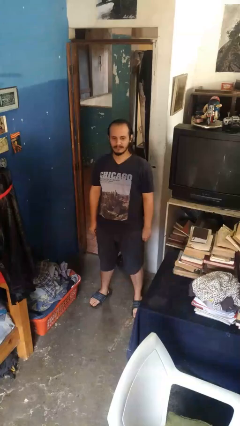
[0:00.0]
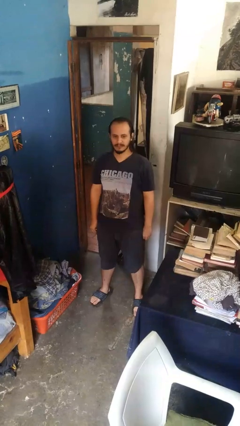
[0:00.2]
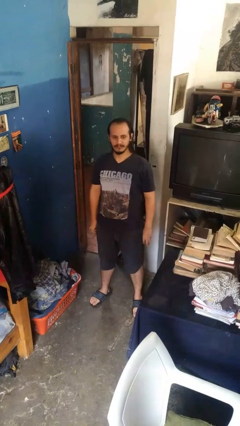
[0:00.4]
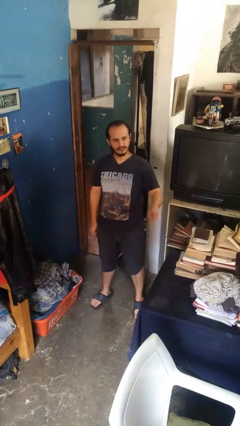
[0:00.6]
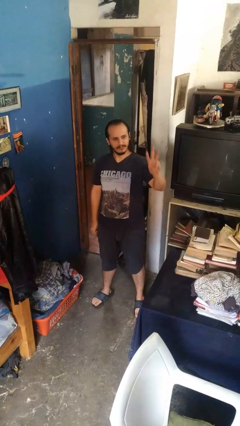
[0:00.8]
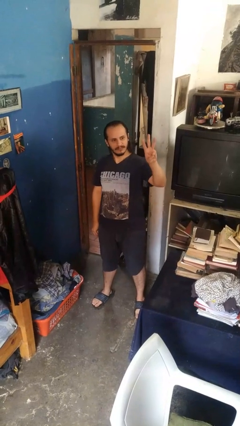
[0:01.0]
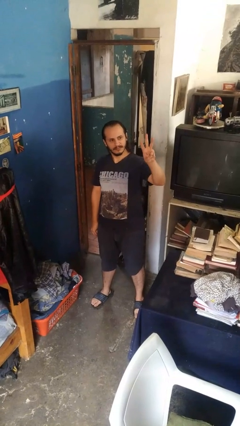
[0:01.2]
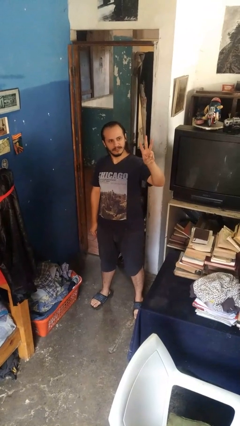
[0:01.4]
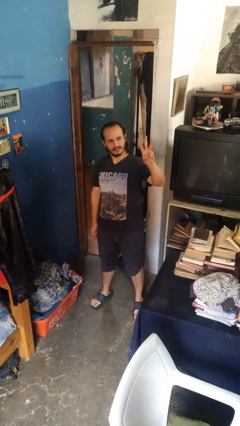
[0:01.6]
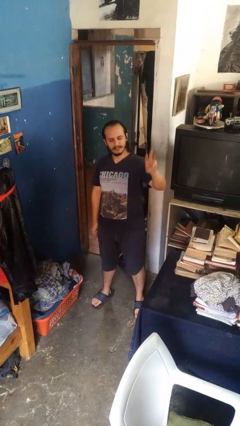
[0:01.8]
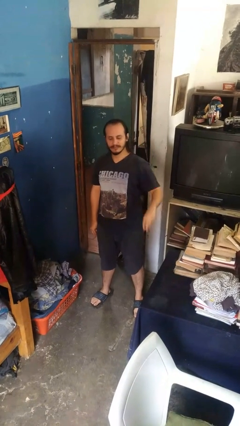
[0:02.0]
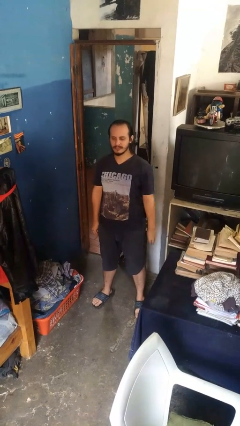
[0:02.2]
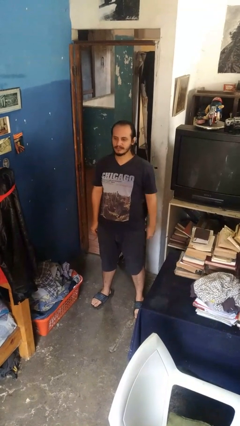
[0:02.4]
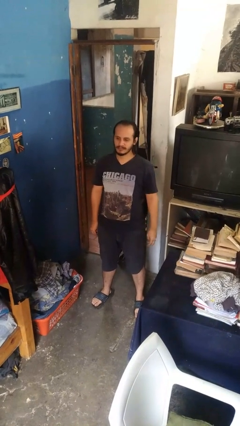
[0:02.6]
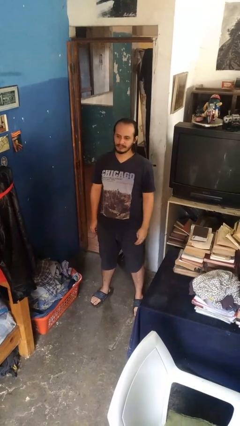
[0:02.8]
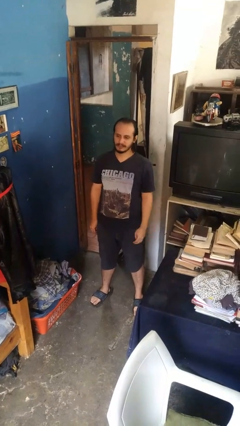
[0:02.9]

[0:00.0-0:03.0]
person gestures number three

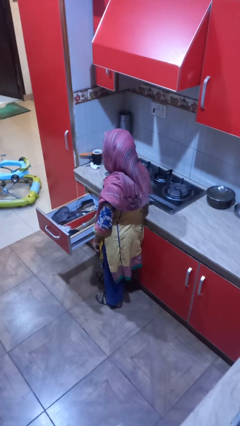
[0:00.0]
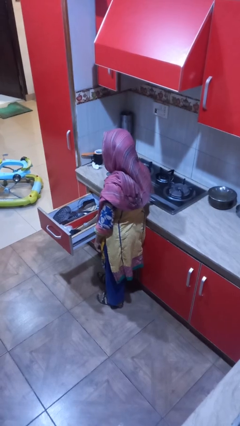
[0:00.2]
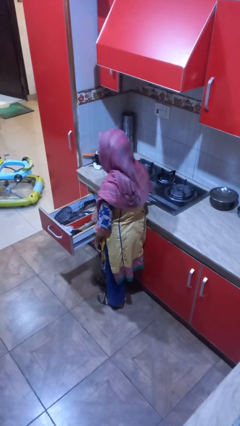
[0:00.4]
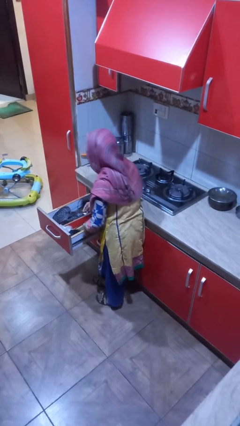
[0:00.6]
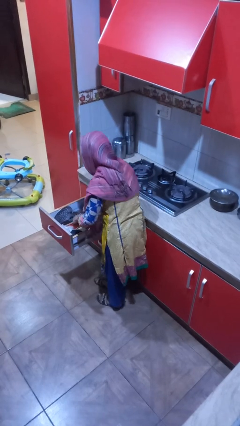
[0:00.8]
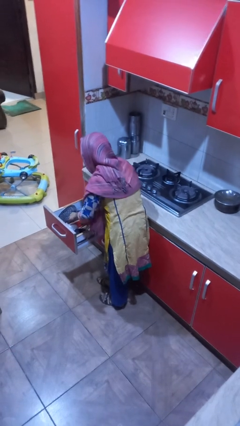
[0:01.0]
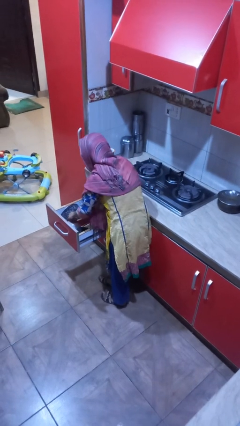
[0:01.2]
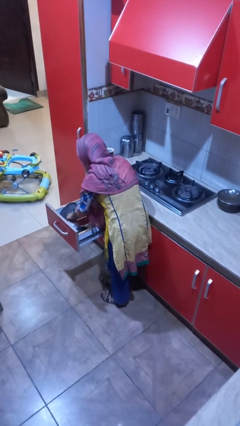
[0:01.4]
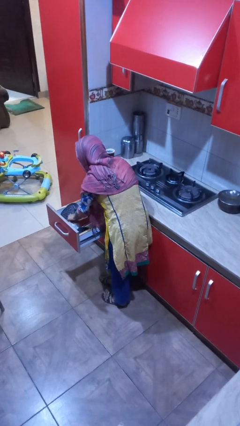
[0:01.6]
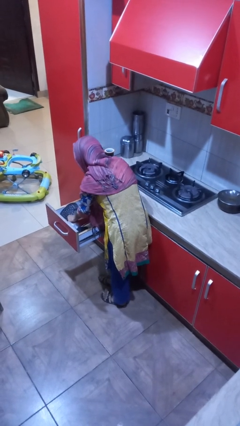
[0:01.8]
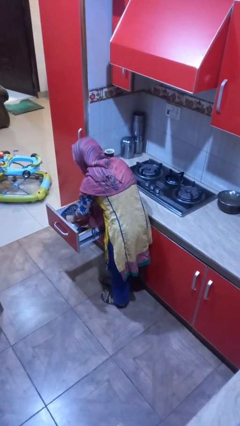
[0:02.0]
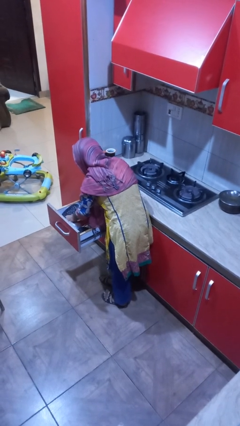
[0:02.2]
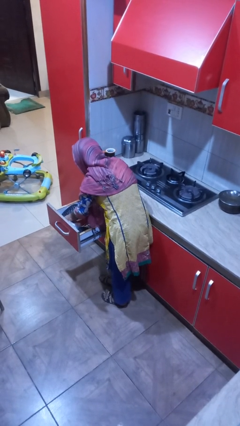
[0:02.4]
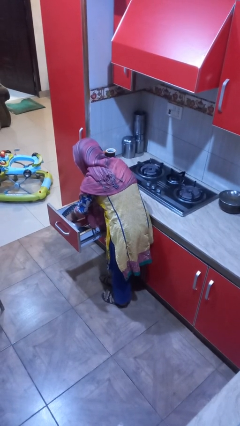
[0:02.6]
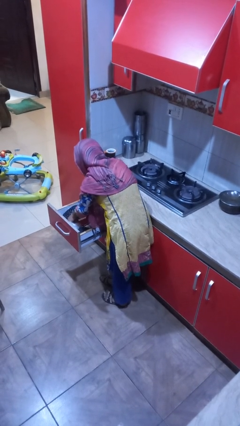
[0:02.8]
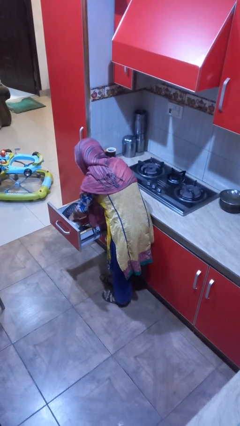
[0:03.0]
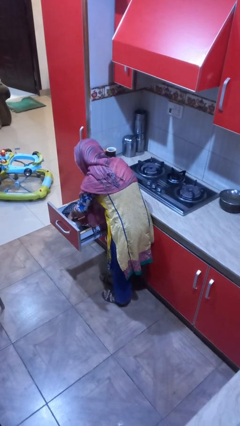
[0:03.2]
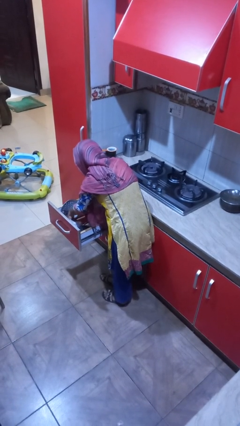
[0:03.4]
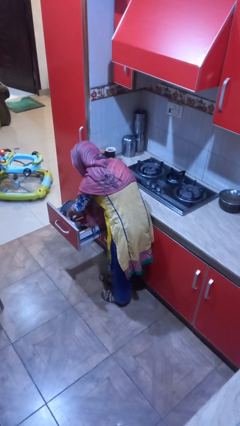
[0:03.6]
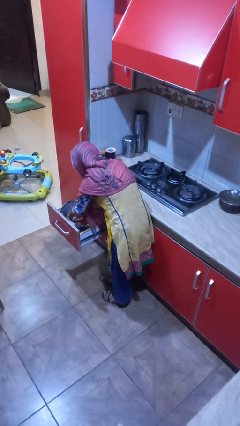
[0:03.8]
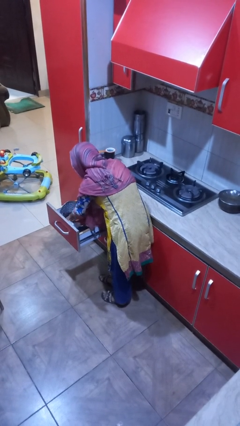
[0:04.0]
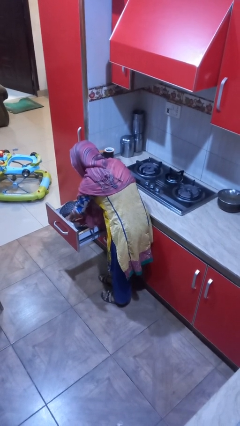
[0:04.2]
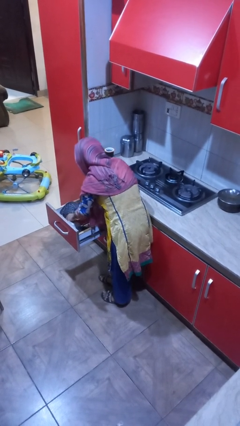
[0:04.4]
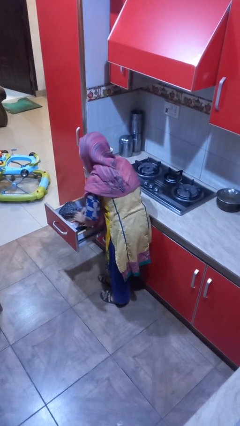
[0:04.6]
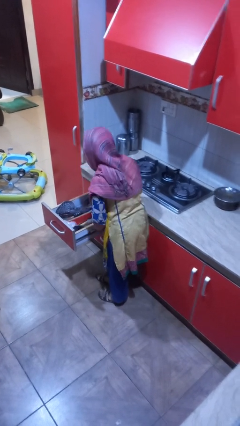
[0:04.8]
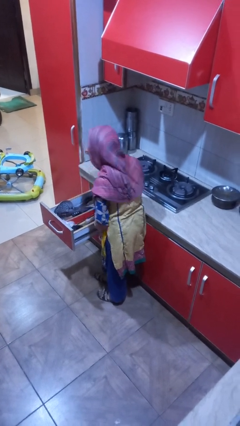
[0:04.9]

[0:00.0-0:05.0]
person searches in kitchen drawer

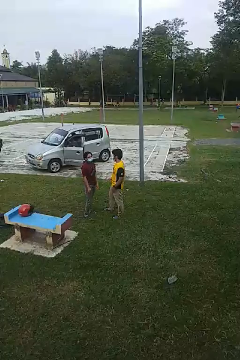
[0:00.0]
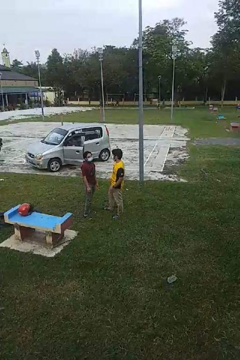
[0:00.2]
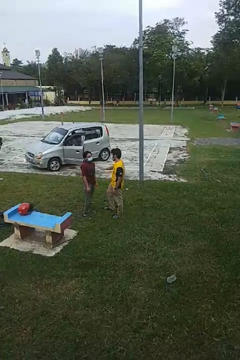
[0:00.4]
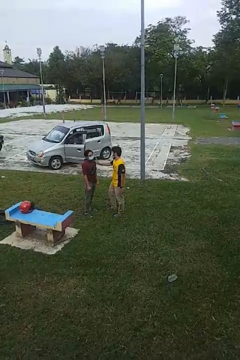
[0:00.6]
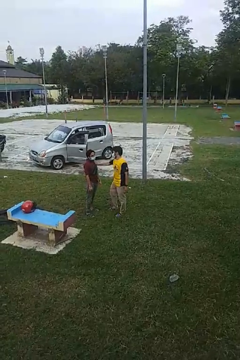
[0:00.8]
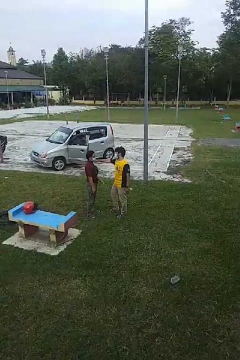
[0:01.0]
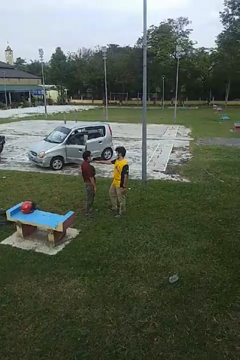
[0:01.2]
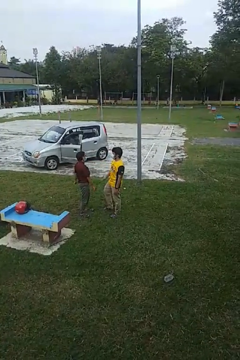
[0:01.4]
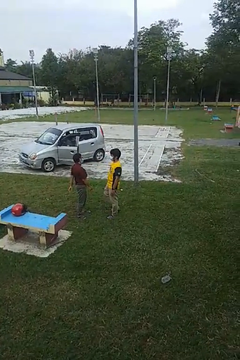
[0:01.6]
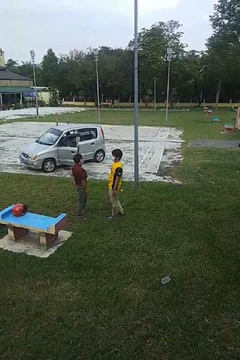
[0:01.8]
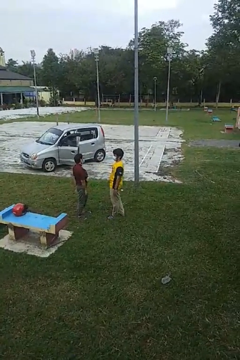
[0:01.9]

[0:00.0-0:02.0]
person shoves person

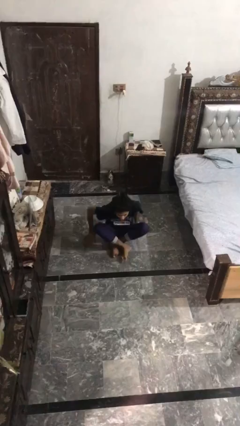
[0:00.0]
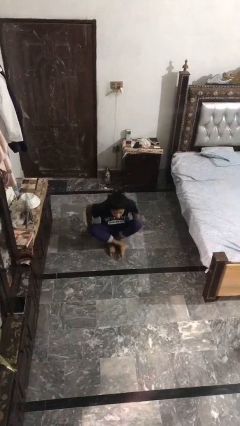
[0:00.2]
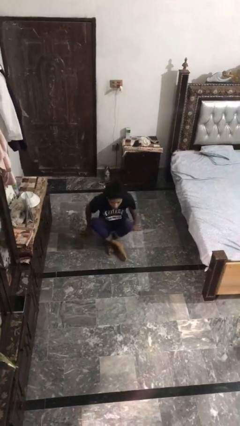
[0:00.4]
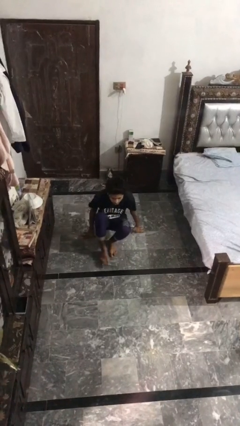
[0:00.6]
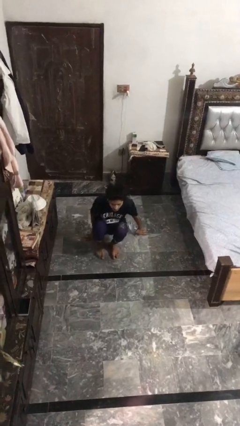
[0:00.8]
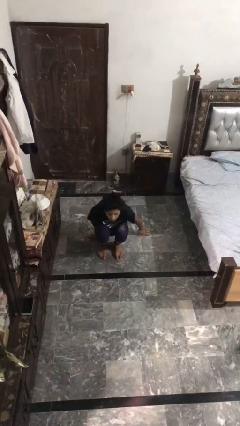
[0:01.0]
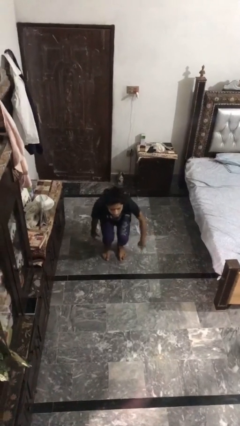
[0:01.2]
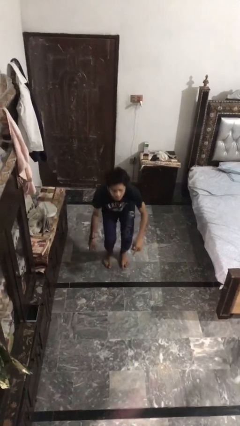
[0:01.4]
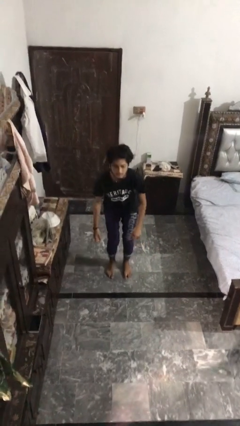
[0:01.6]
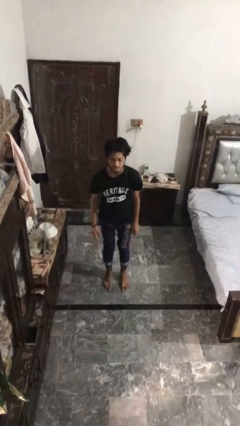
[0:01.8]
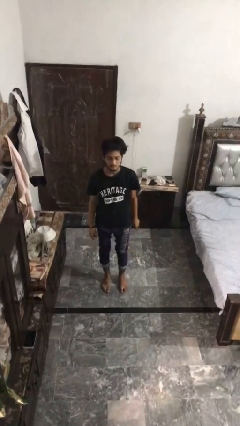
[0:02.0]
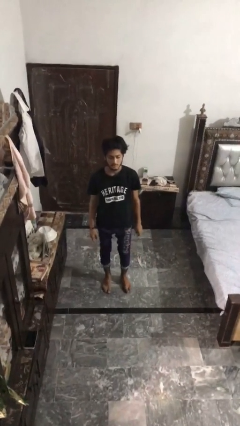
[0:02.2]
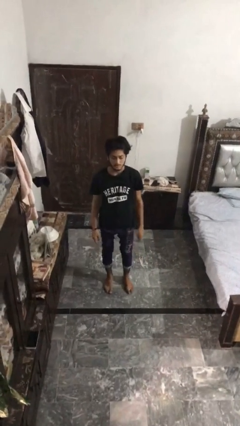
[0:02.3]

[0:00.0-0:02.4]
person stands up from floor

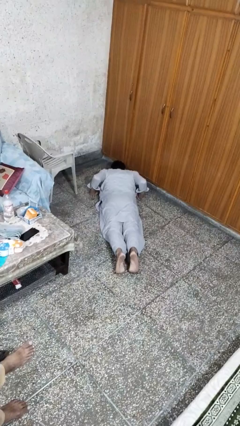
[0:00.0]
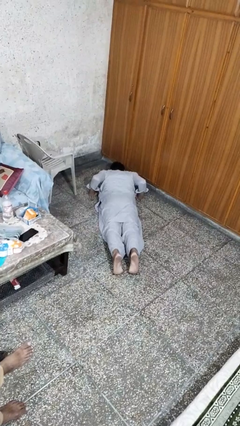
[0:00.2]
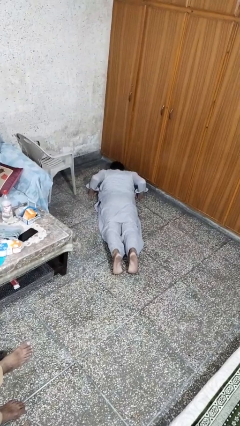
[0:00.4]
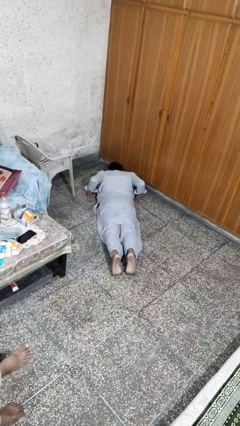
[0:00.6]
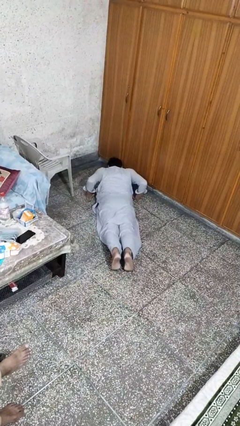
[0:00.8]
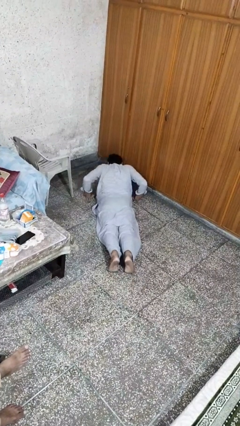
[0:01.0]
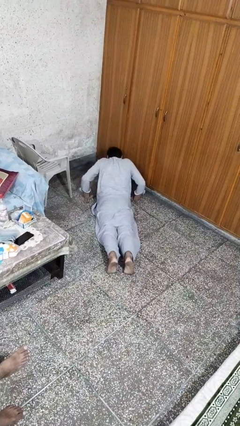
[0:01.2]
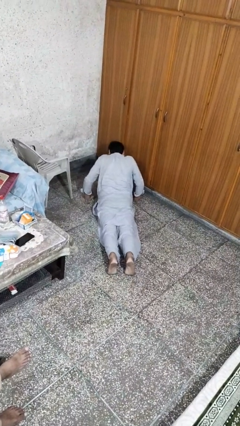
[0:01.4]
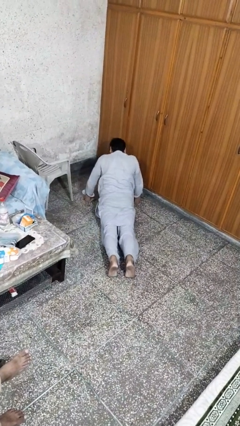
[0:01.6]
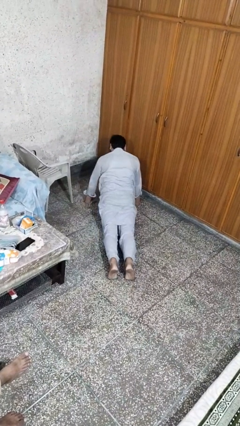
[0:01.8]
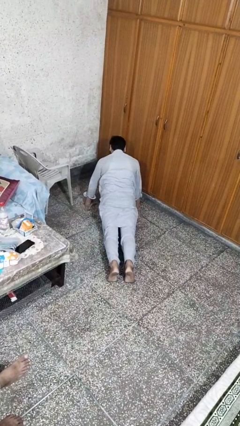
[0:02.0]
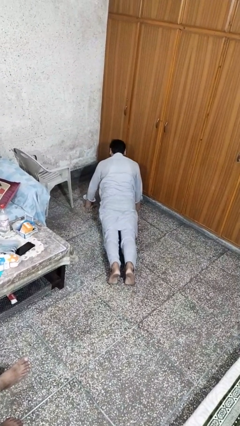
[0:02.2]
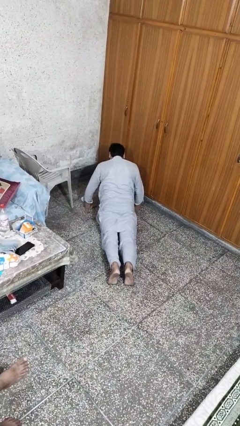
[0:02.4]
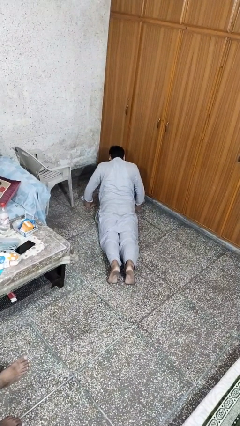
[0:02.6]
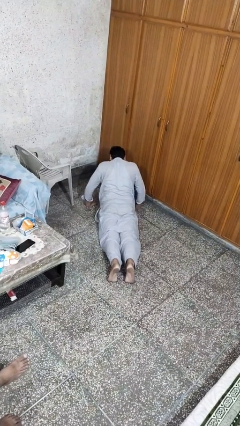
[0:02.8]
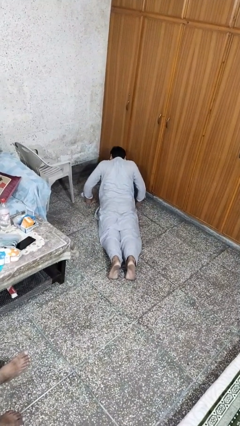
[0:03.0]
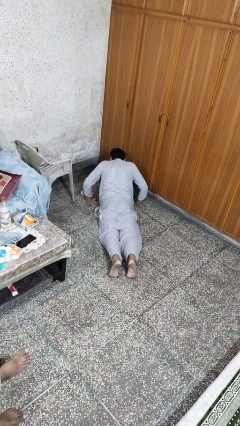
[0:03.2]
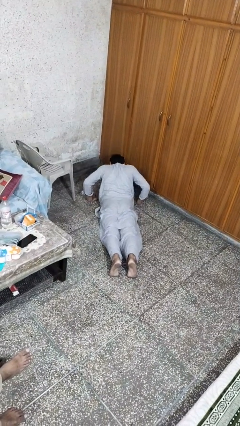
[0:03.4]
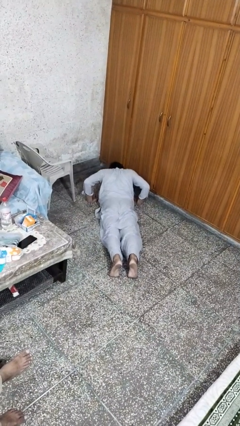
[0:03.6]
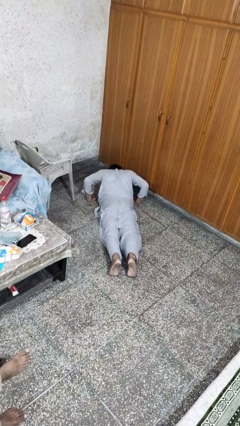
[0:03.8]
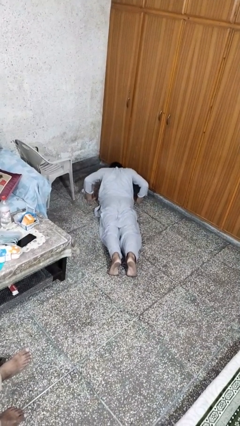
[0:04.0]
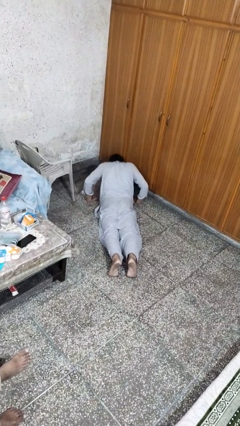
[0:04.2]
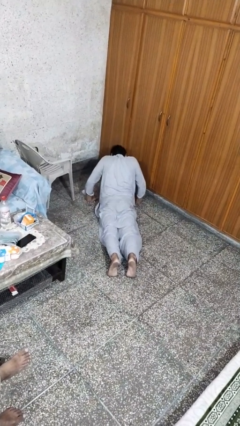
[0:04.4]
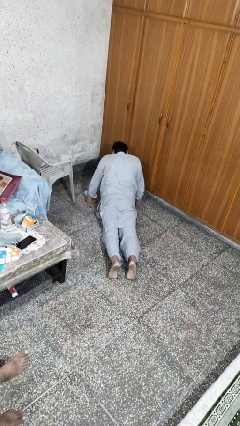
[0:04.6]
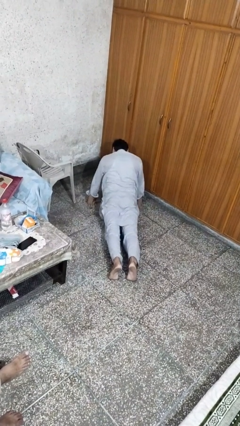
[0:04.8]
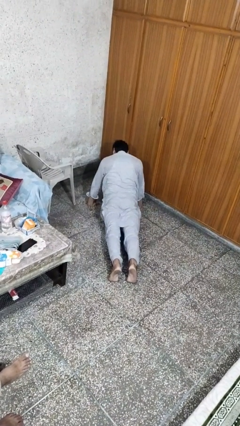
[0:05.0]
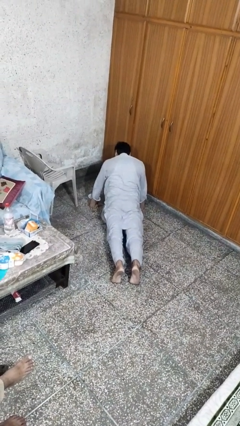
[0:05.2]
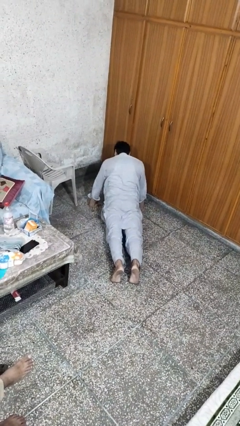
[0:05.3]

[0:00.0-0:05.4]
person exercises with pushup
